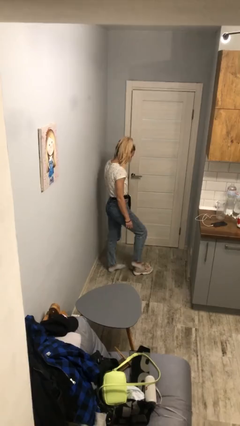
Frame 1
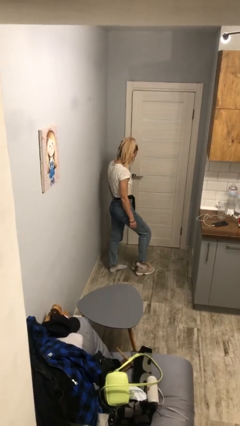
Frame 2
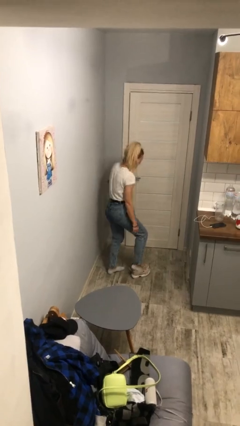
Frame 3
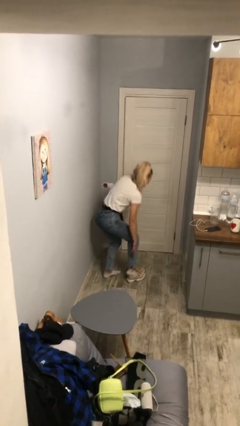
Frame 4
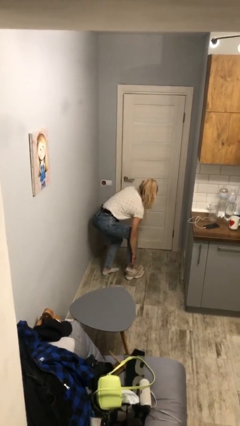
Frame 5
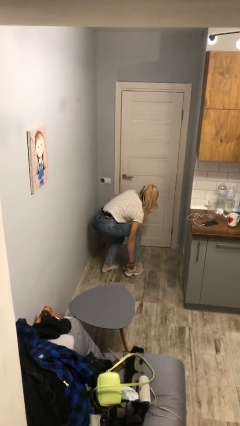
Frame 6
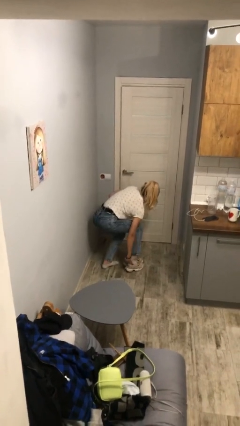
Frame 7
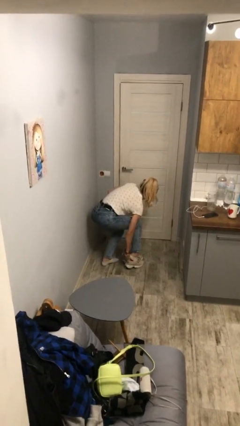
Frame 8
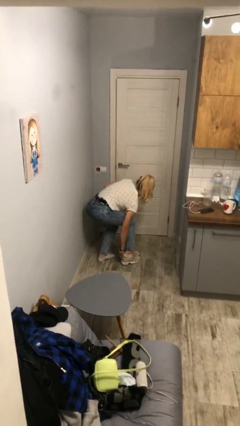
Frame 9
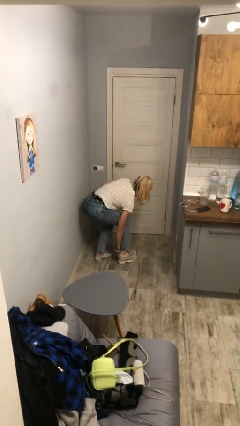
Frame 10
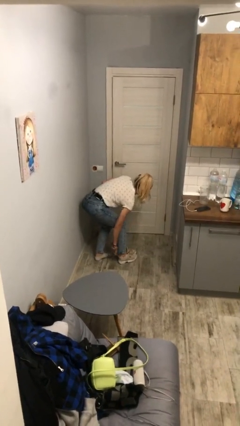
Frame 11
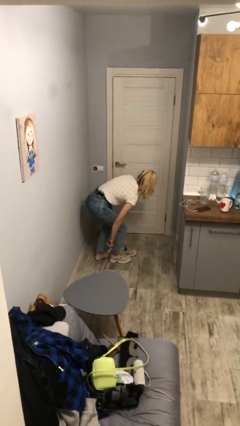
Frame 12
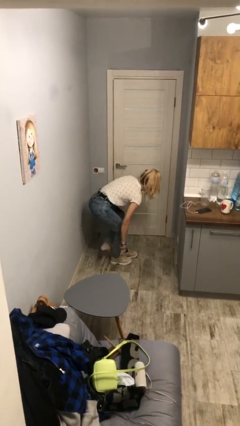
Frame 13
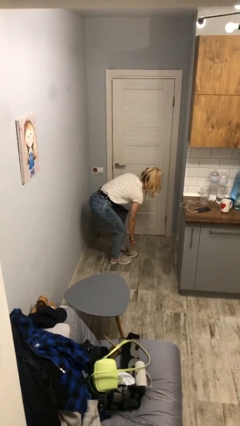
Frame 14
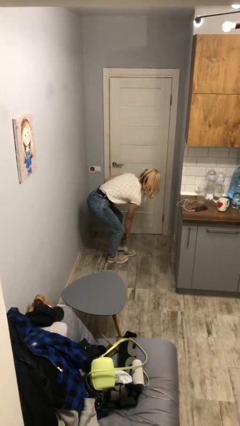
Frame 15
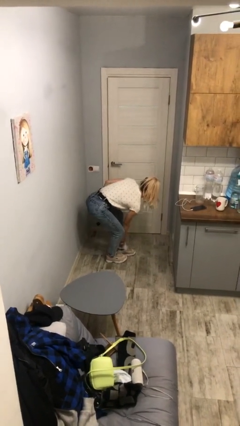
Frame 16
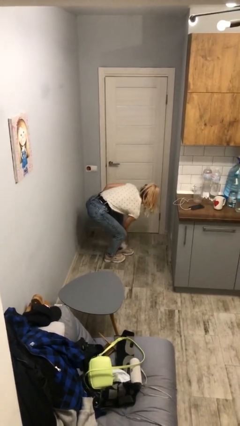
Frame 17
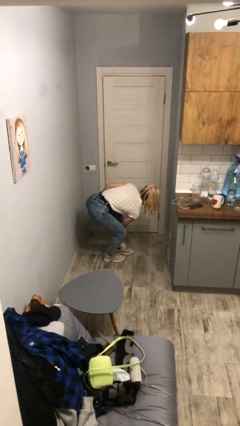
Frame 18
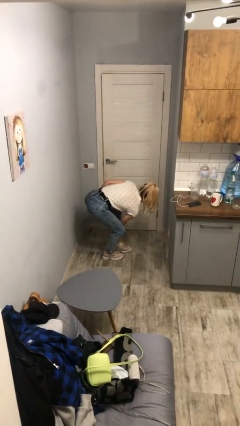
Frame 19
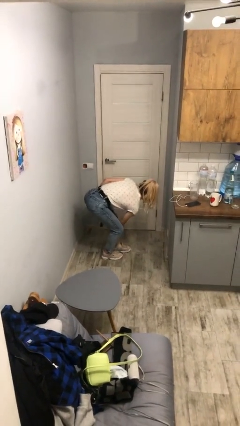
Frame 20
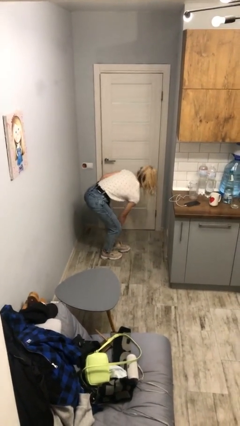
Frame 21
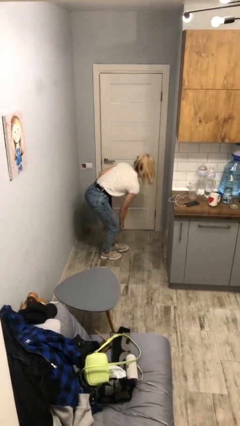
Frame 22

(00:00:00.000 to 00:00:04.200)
person puts on shoes

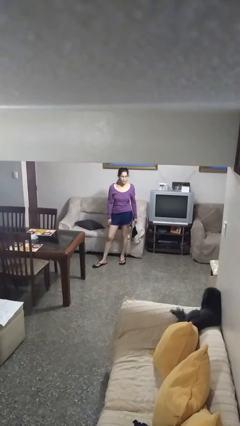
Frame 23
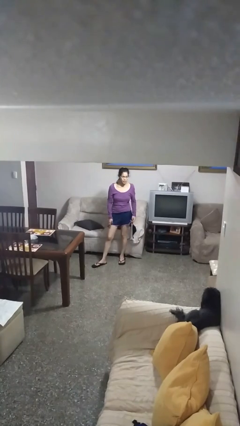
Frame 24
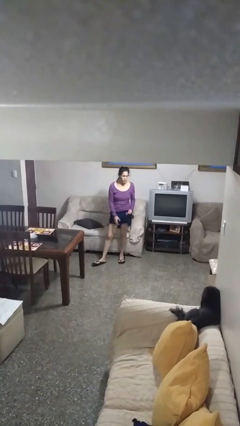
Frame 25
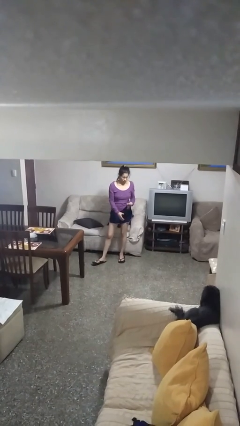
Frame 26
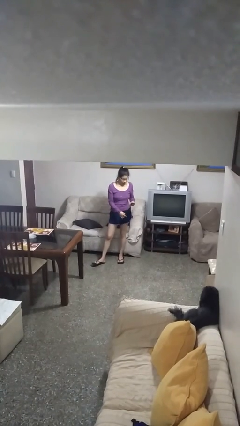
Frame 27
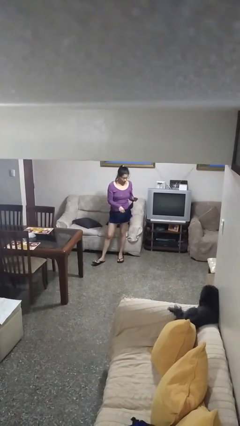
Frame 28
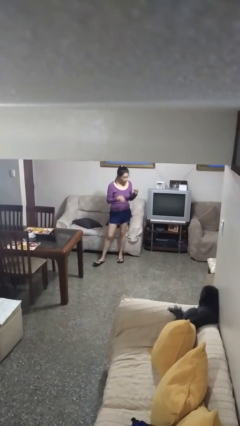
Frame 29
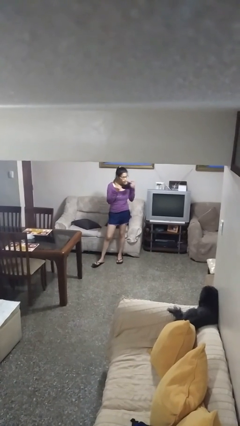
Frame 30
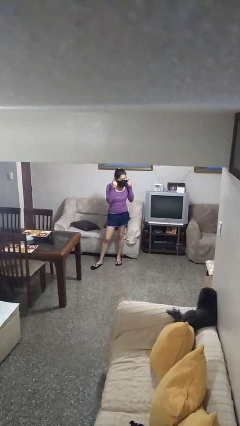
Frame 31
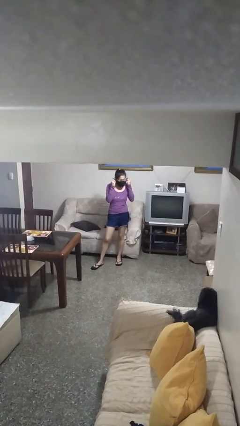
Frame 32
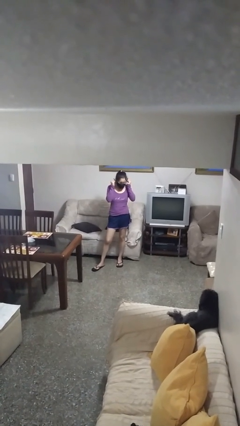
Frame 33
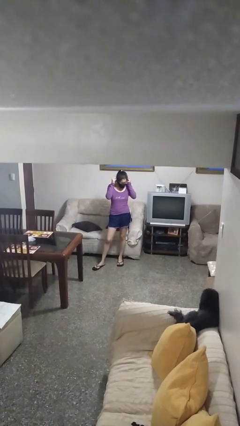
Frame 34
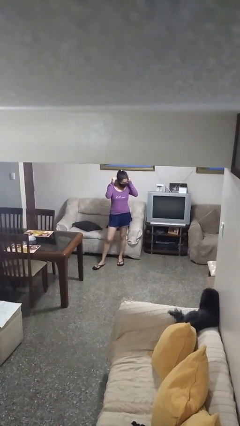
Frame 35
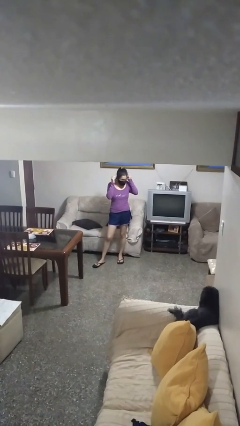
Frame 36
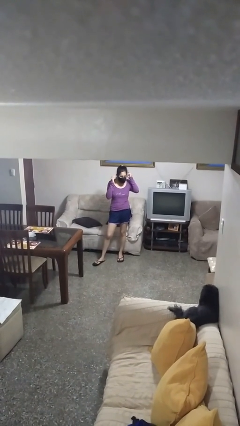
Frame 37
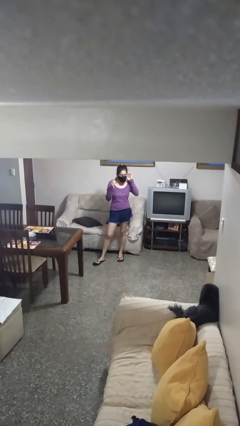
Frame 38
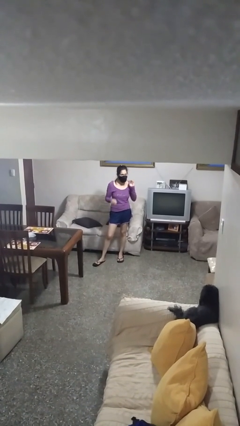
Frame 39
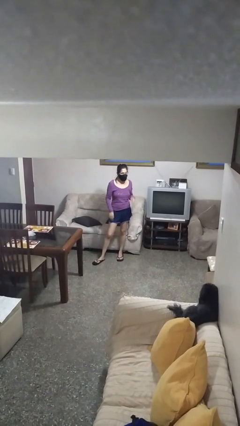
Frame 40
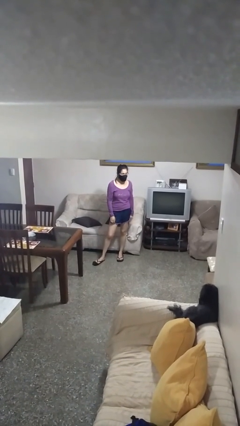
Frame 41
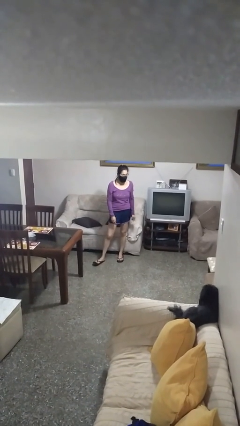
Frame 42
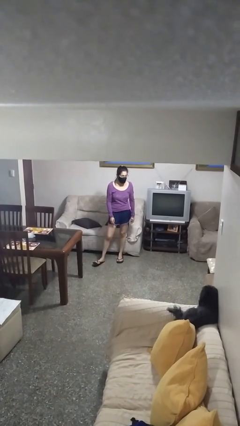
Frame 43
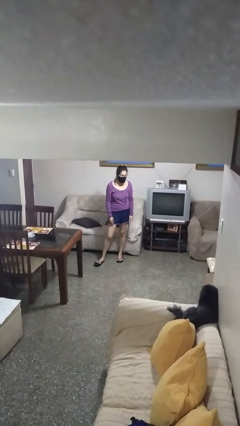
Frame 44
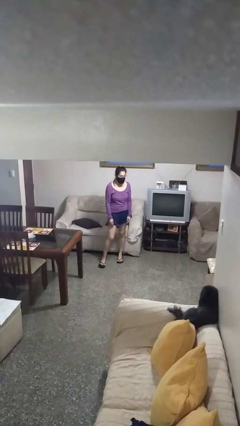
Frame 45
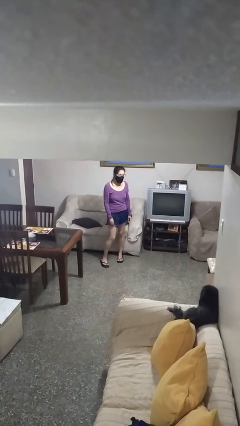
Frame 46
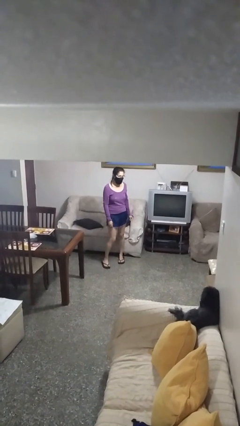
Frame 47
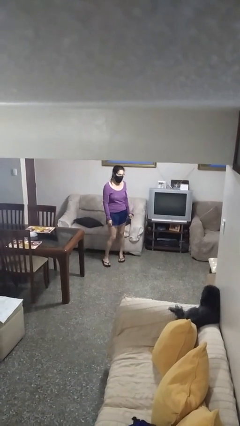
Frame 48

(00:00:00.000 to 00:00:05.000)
person puts on facemask

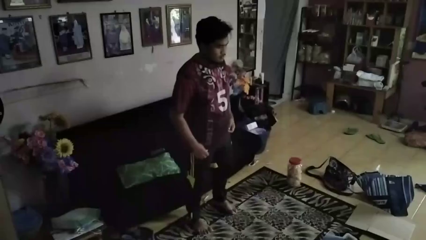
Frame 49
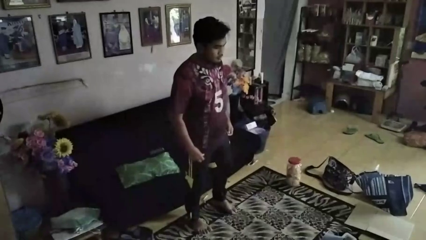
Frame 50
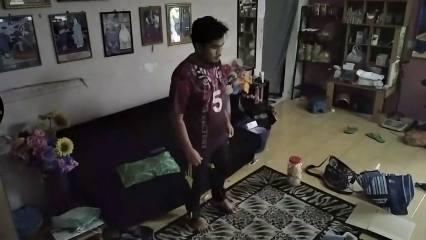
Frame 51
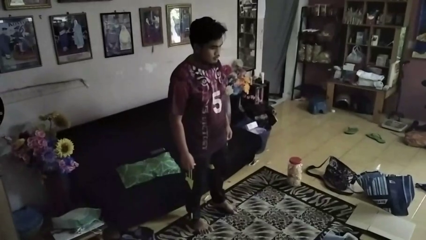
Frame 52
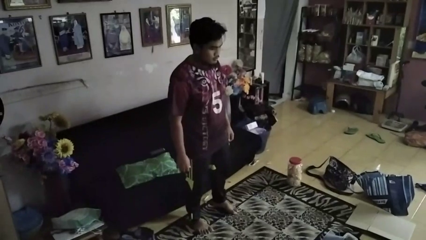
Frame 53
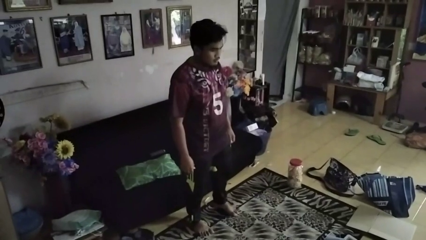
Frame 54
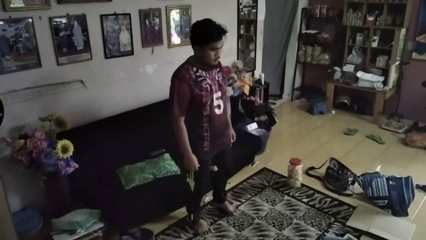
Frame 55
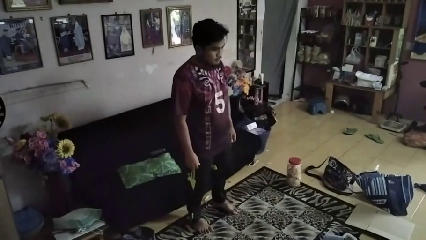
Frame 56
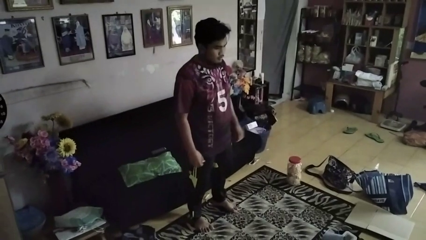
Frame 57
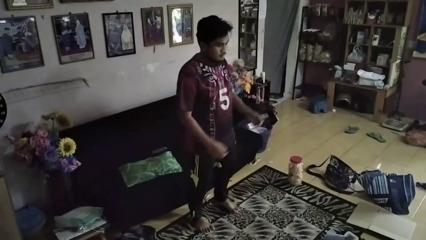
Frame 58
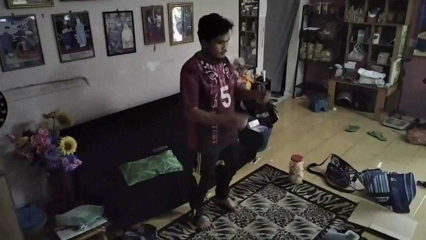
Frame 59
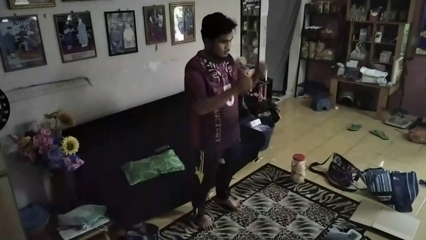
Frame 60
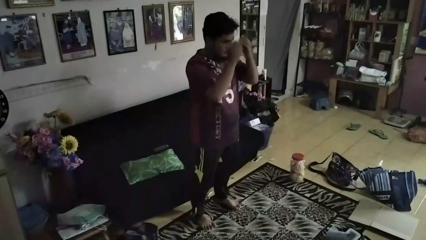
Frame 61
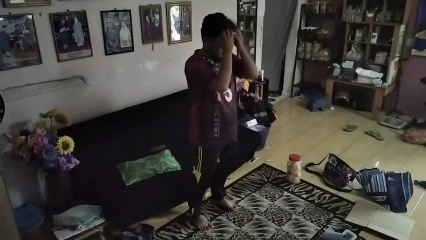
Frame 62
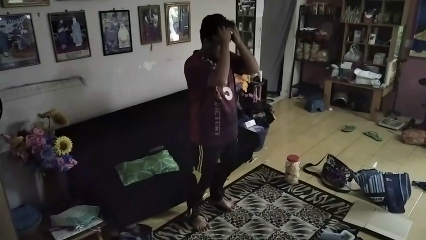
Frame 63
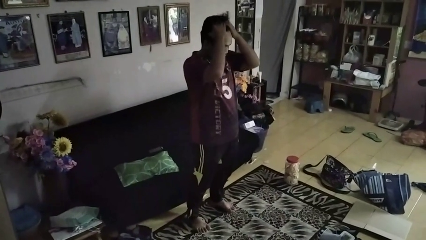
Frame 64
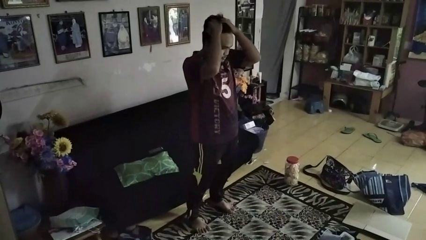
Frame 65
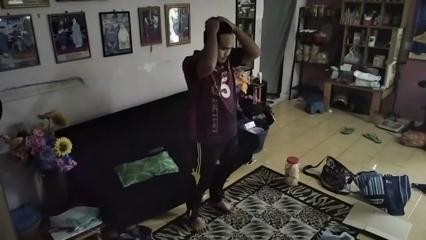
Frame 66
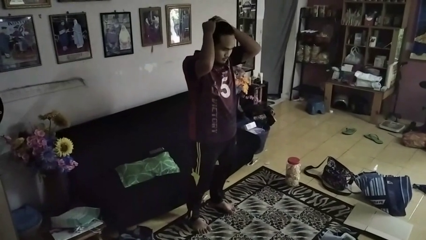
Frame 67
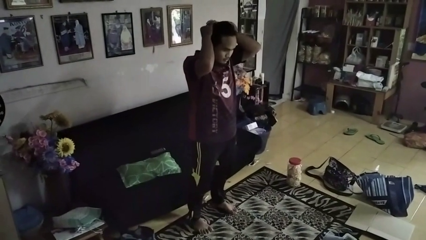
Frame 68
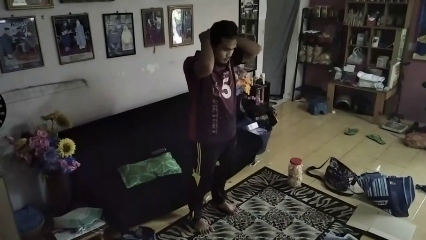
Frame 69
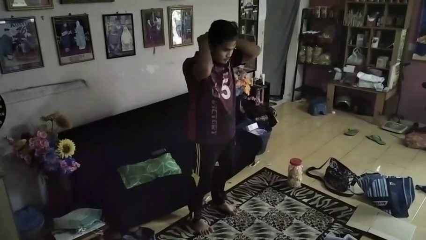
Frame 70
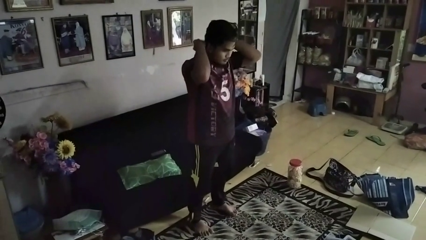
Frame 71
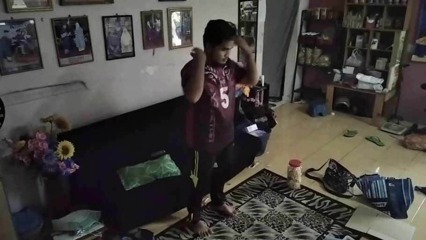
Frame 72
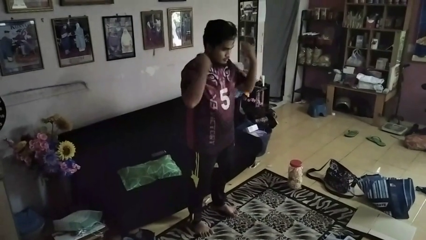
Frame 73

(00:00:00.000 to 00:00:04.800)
person strokes hair

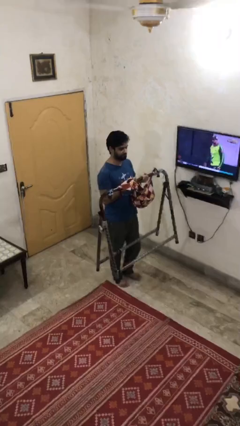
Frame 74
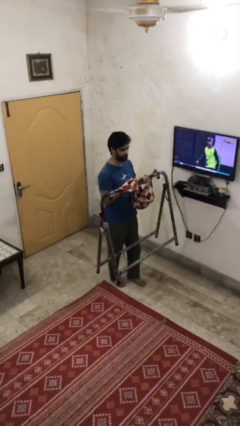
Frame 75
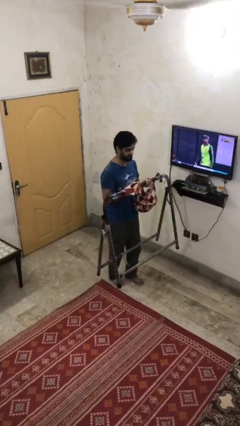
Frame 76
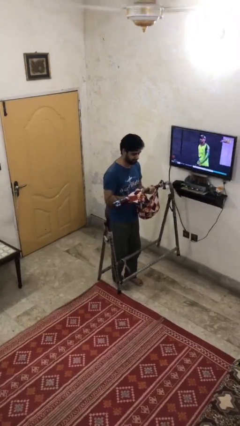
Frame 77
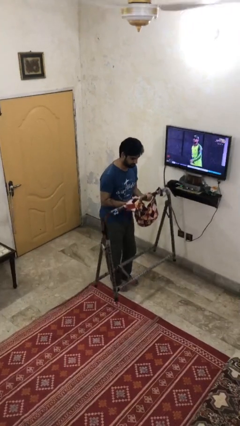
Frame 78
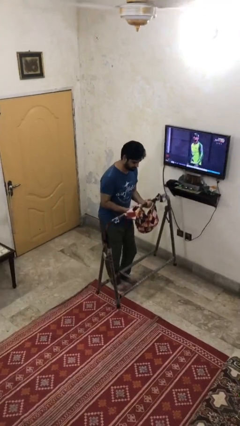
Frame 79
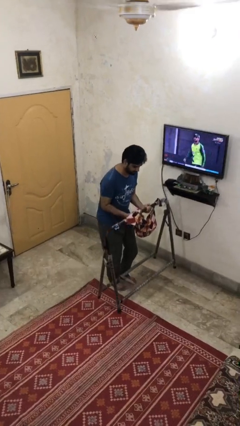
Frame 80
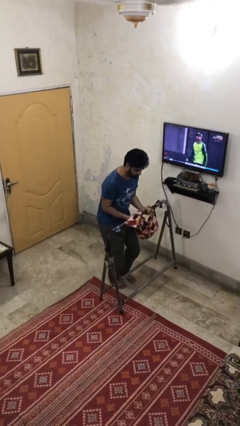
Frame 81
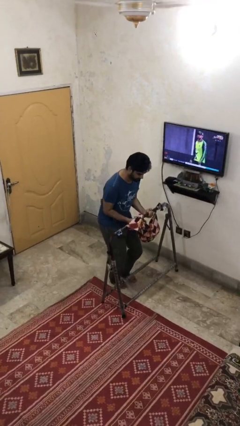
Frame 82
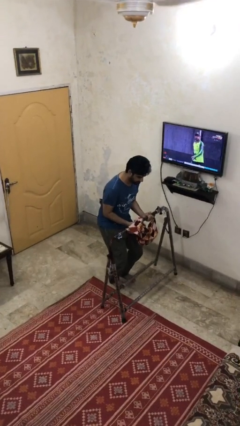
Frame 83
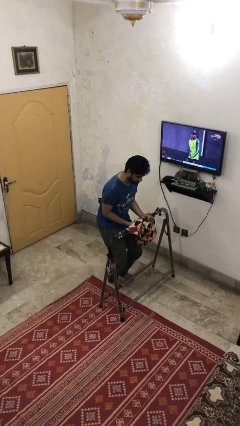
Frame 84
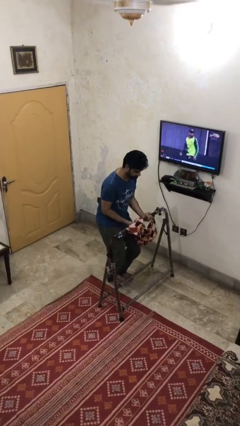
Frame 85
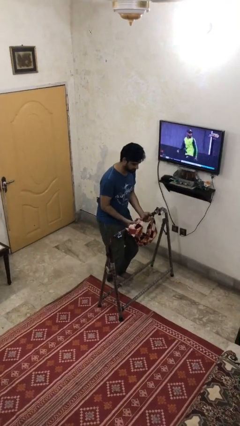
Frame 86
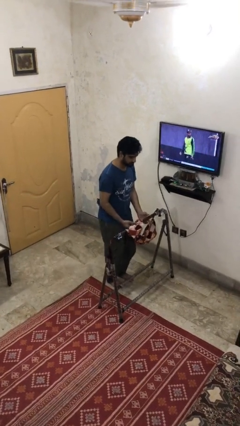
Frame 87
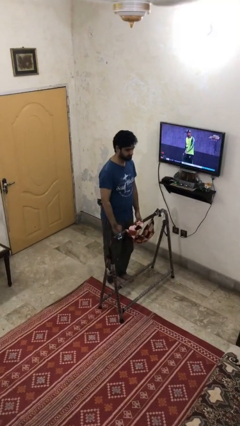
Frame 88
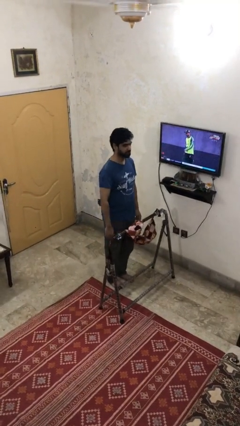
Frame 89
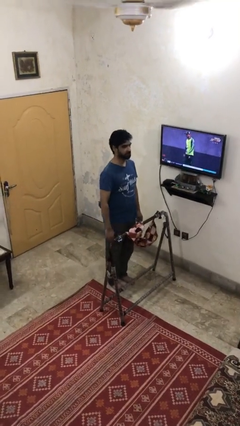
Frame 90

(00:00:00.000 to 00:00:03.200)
person puts down object on floor
